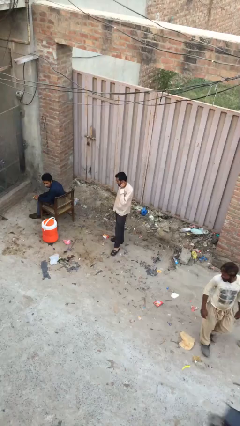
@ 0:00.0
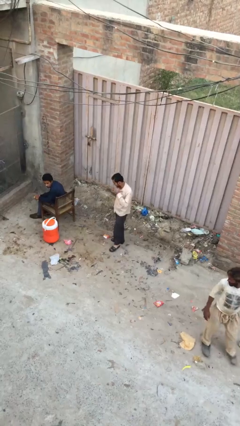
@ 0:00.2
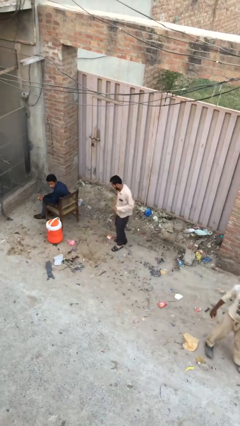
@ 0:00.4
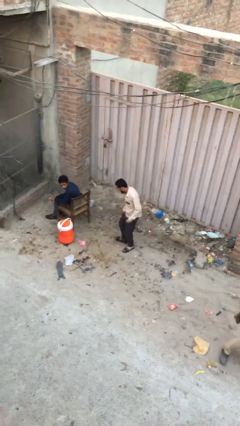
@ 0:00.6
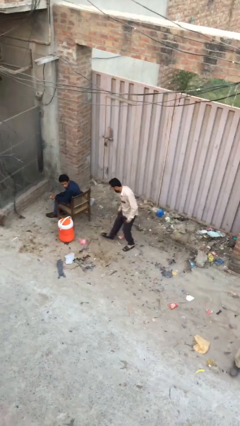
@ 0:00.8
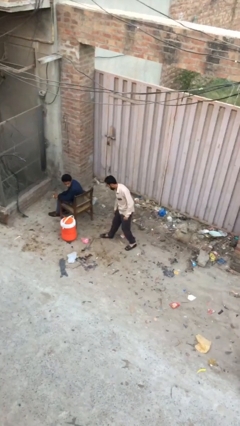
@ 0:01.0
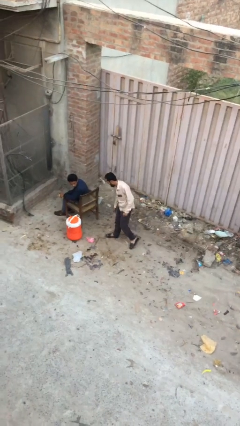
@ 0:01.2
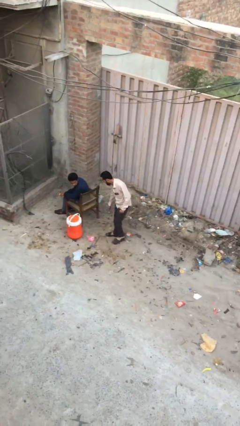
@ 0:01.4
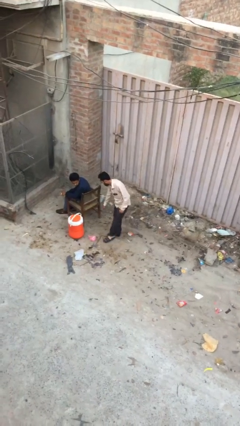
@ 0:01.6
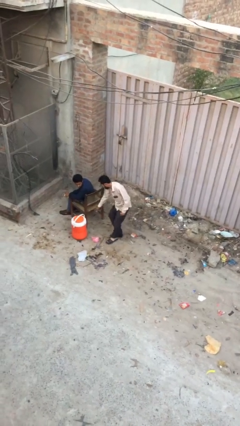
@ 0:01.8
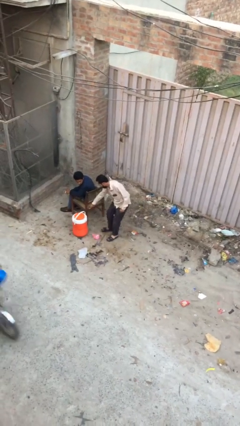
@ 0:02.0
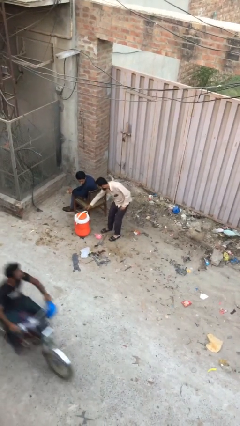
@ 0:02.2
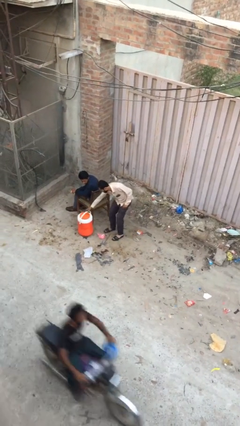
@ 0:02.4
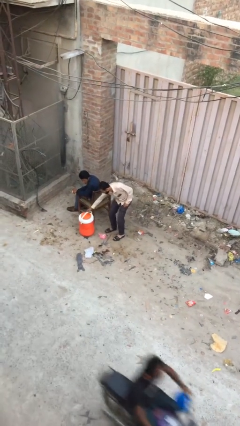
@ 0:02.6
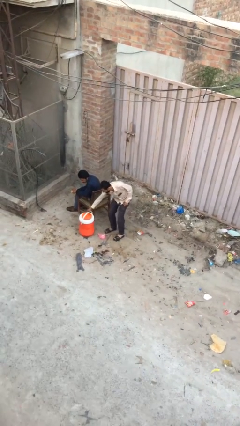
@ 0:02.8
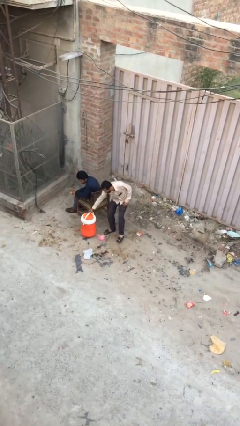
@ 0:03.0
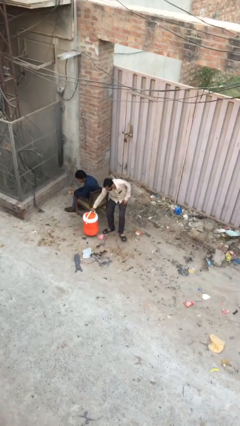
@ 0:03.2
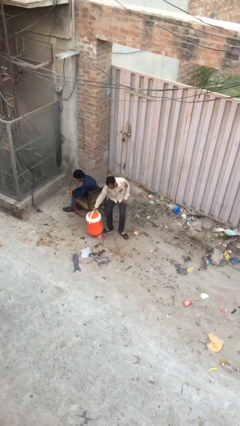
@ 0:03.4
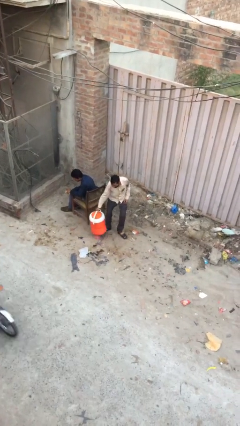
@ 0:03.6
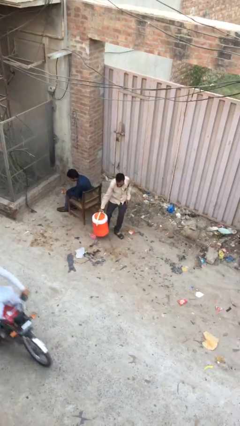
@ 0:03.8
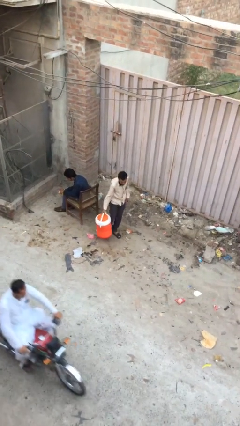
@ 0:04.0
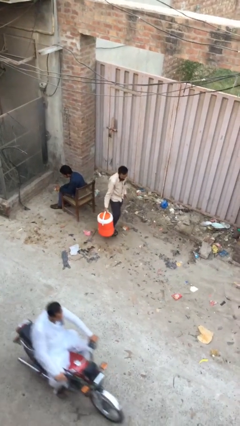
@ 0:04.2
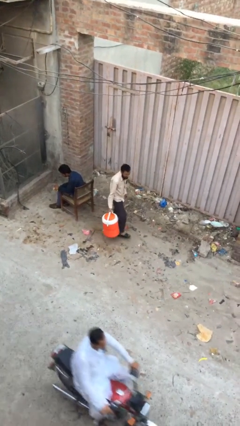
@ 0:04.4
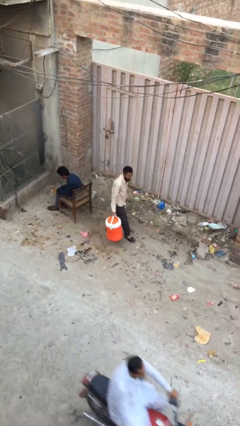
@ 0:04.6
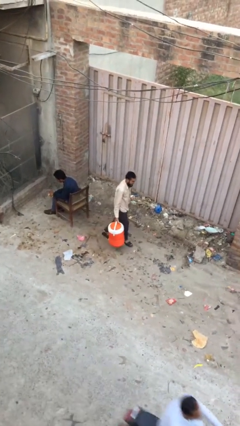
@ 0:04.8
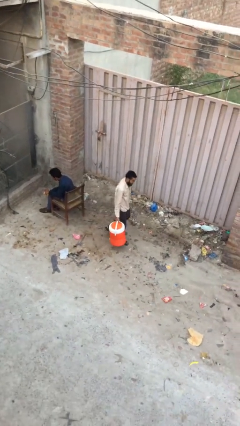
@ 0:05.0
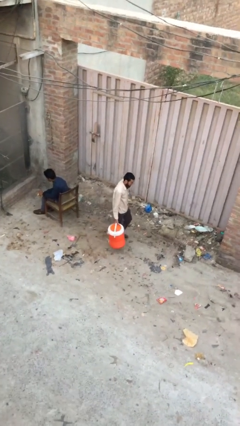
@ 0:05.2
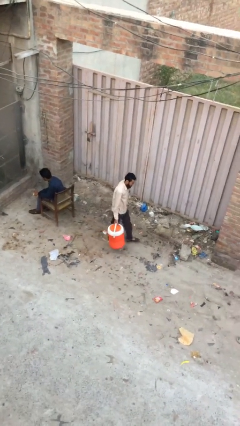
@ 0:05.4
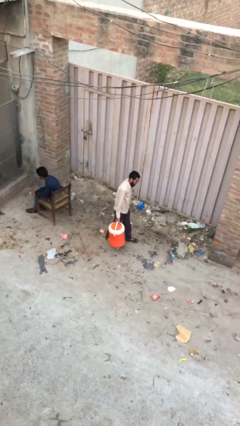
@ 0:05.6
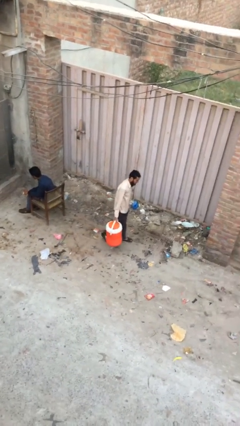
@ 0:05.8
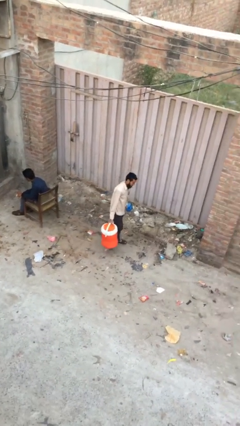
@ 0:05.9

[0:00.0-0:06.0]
person steals object from person

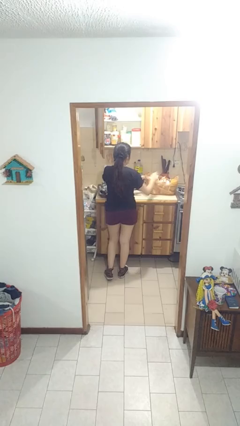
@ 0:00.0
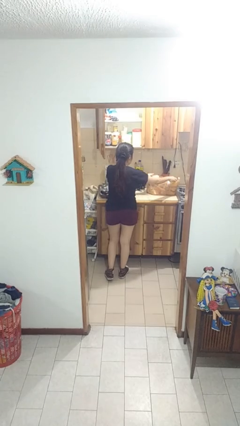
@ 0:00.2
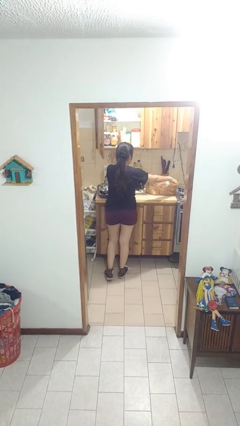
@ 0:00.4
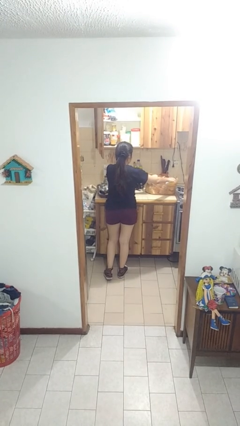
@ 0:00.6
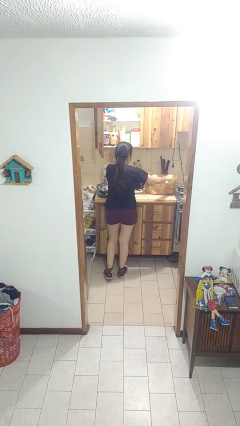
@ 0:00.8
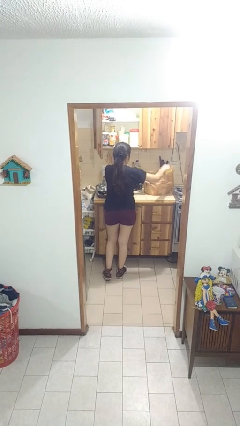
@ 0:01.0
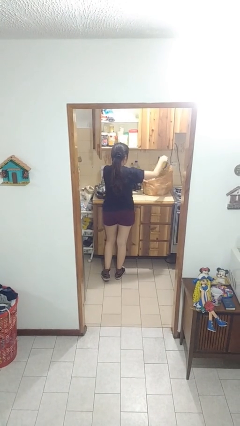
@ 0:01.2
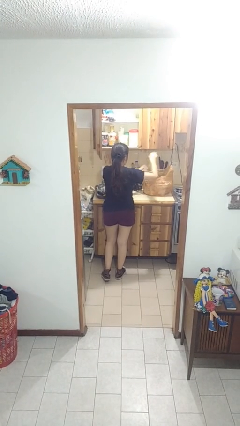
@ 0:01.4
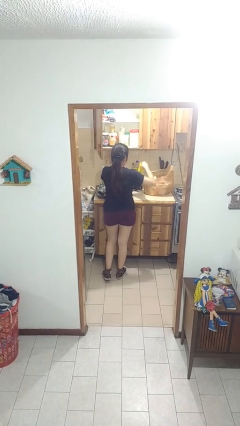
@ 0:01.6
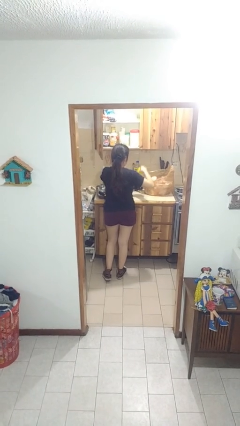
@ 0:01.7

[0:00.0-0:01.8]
person takes object from bag

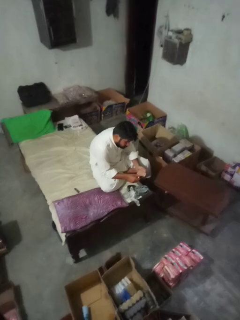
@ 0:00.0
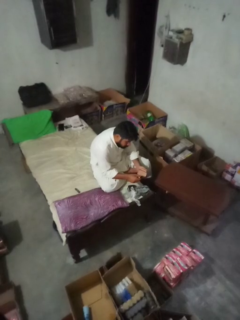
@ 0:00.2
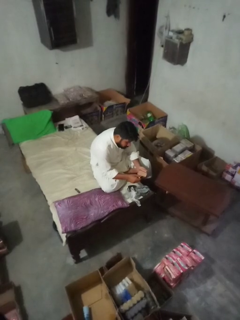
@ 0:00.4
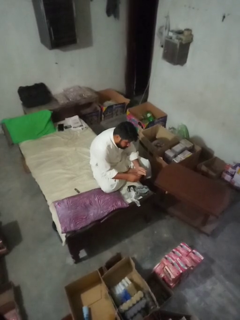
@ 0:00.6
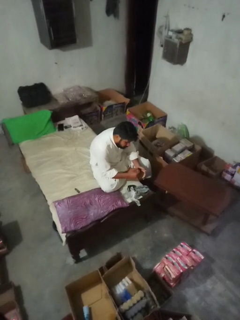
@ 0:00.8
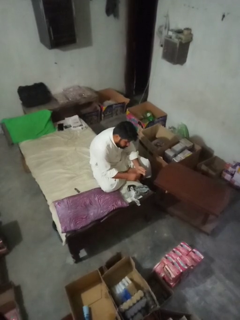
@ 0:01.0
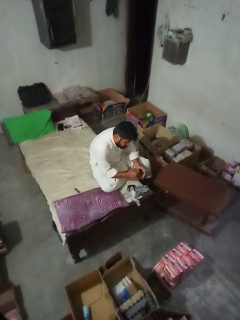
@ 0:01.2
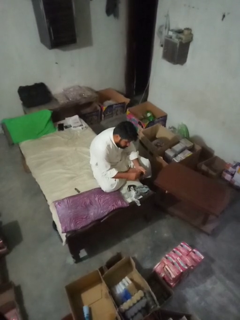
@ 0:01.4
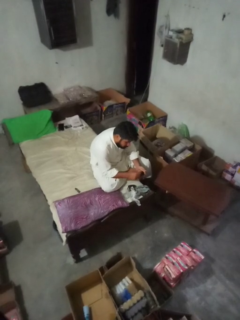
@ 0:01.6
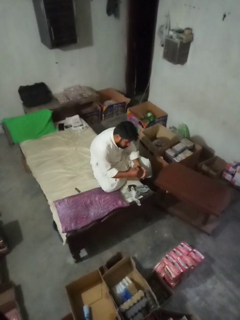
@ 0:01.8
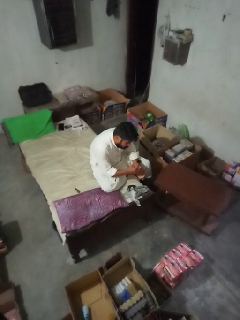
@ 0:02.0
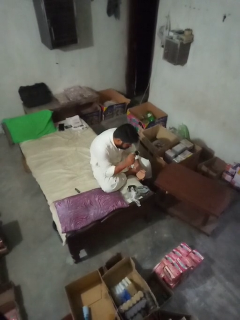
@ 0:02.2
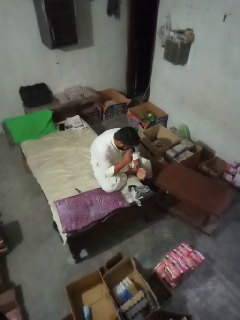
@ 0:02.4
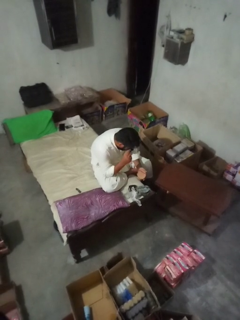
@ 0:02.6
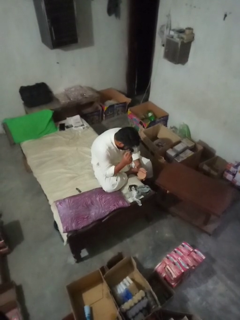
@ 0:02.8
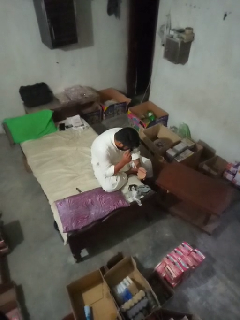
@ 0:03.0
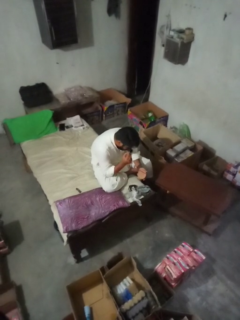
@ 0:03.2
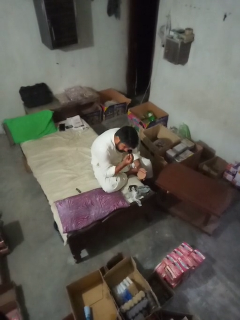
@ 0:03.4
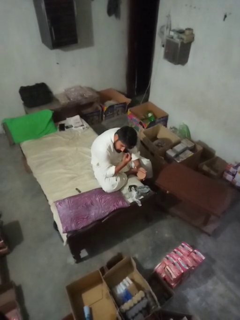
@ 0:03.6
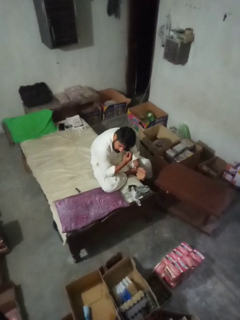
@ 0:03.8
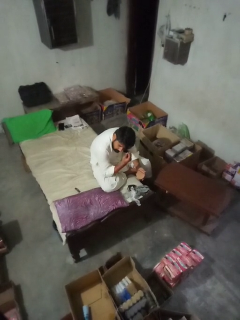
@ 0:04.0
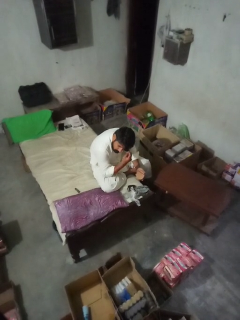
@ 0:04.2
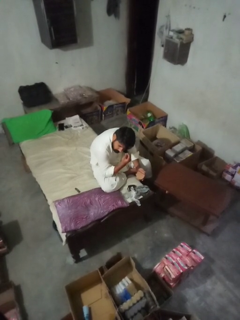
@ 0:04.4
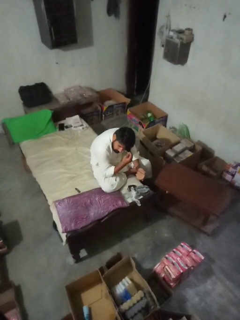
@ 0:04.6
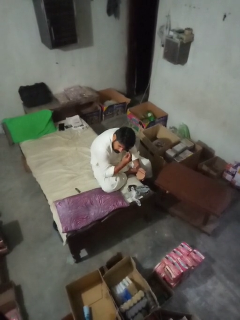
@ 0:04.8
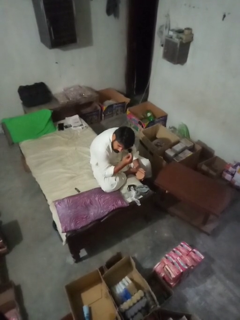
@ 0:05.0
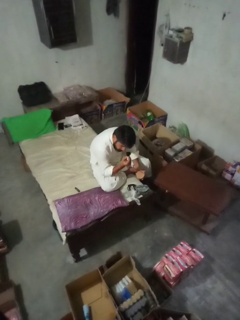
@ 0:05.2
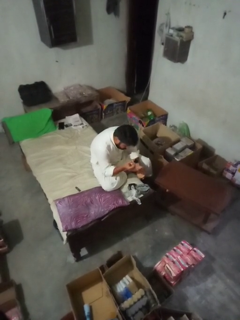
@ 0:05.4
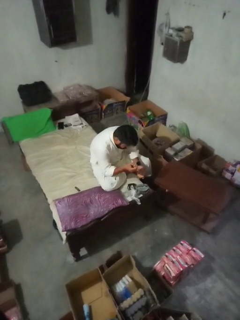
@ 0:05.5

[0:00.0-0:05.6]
person applies eye makeup

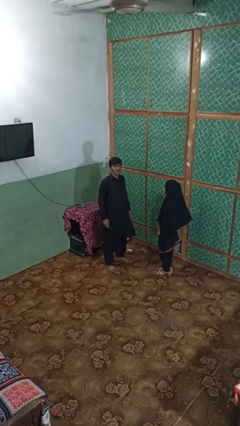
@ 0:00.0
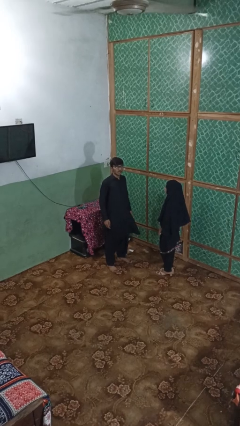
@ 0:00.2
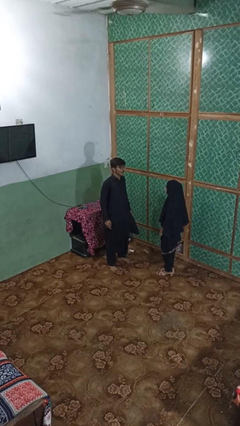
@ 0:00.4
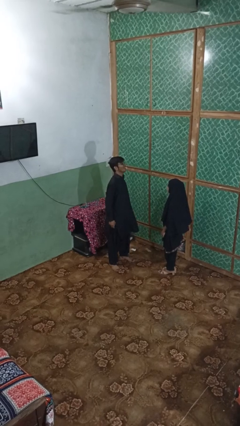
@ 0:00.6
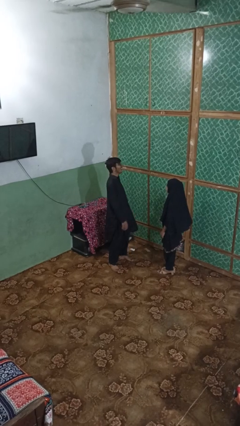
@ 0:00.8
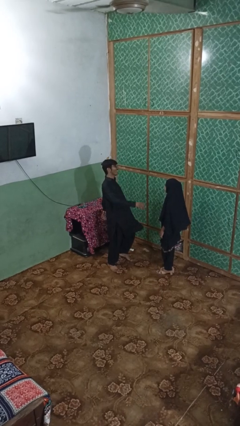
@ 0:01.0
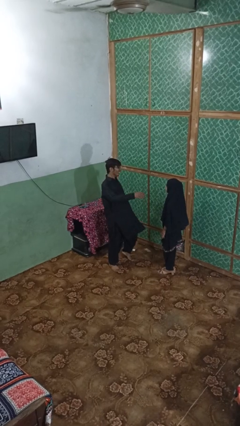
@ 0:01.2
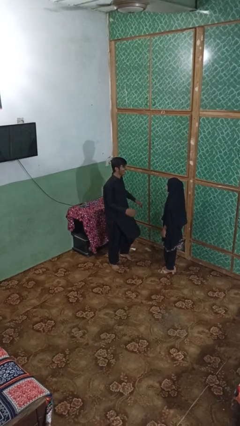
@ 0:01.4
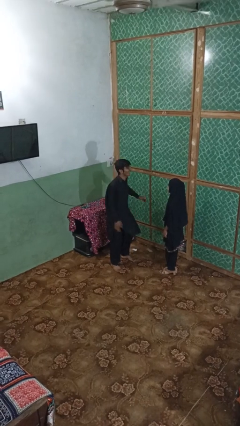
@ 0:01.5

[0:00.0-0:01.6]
person laughs with person

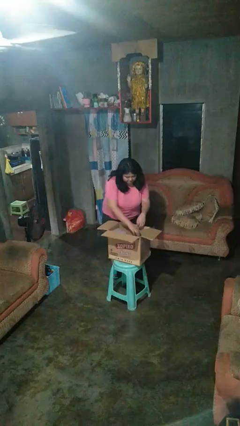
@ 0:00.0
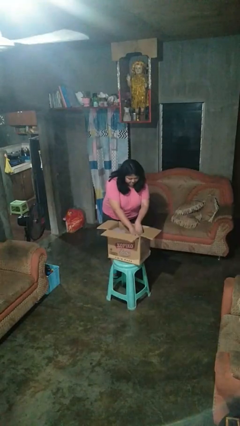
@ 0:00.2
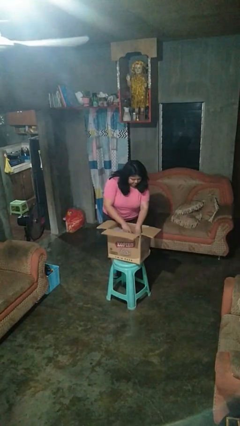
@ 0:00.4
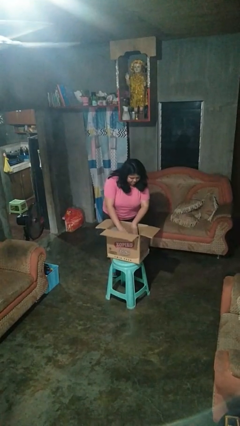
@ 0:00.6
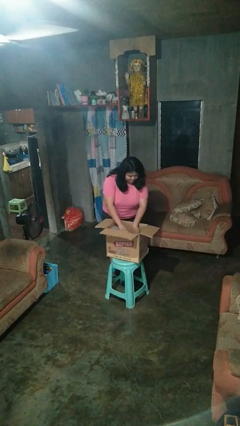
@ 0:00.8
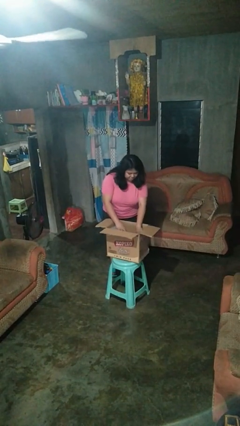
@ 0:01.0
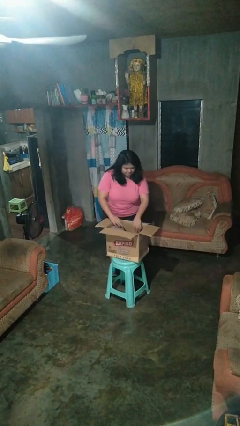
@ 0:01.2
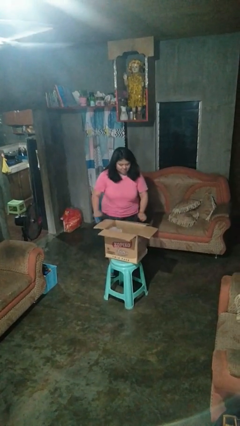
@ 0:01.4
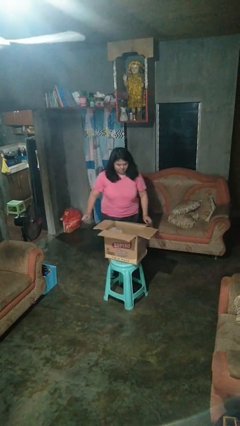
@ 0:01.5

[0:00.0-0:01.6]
person searches in box

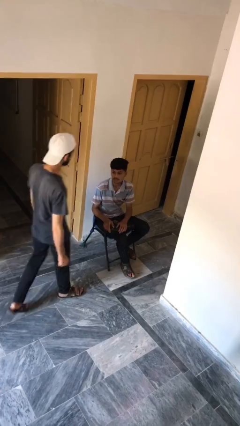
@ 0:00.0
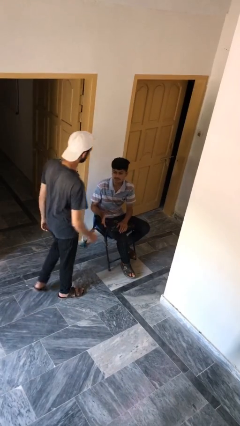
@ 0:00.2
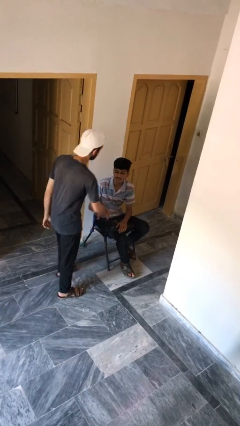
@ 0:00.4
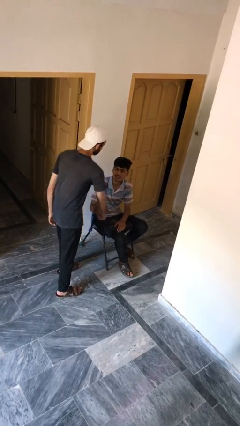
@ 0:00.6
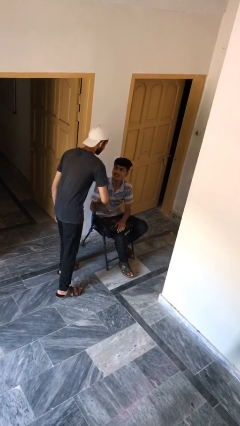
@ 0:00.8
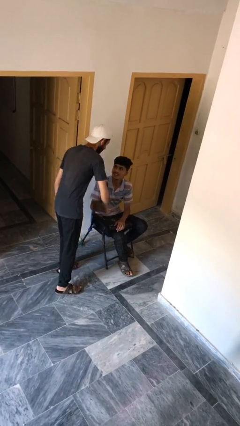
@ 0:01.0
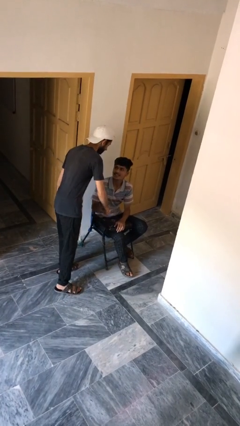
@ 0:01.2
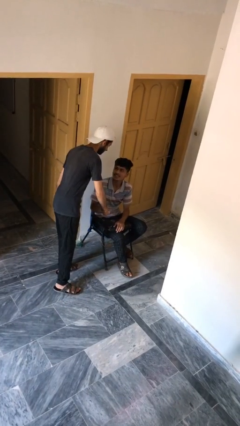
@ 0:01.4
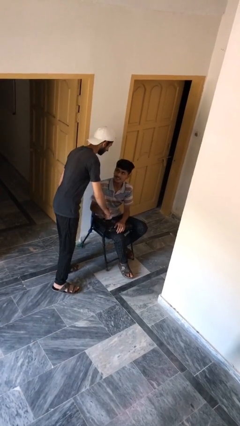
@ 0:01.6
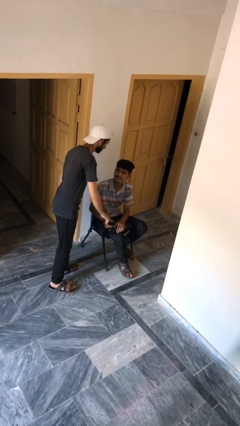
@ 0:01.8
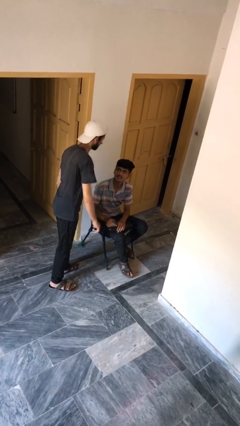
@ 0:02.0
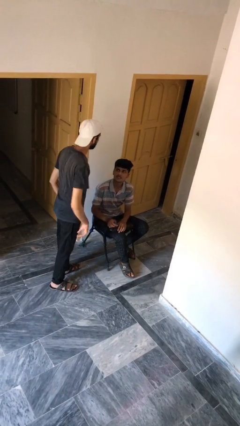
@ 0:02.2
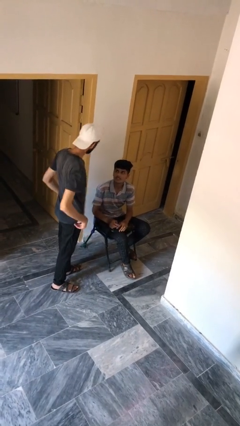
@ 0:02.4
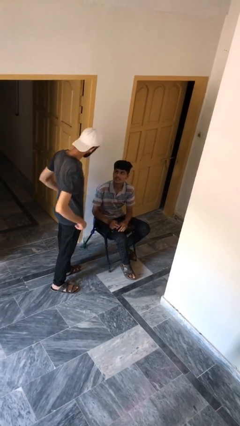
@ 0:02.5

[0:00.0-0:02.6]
person shakes hand
